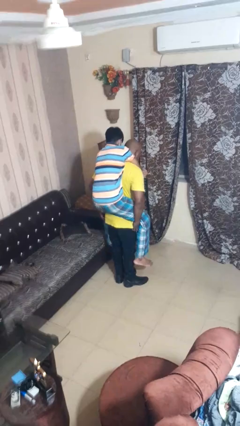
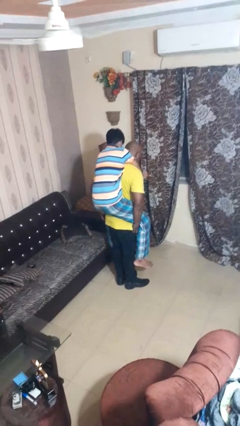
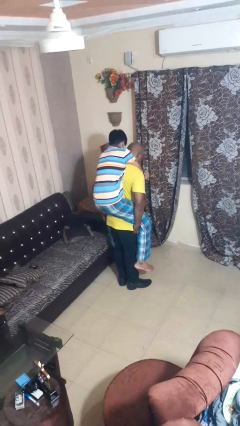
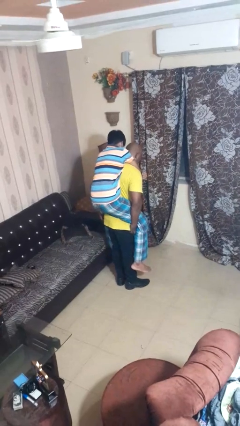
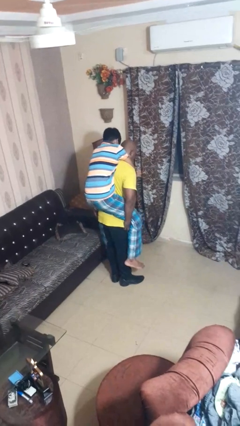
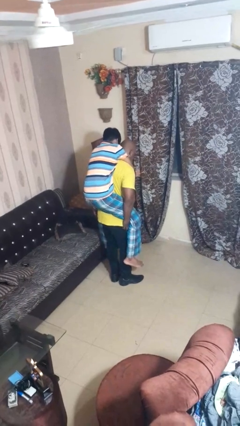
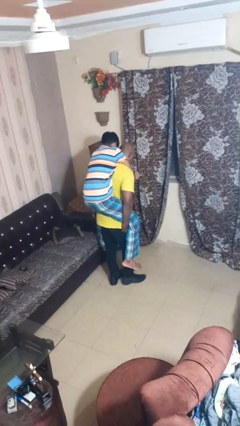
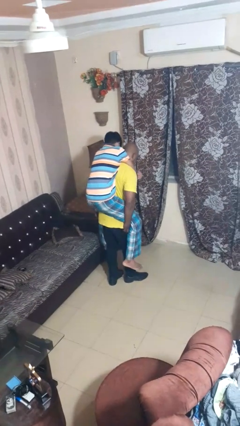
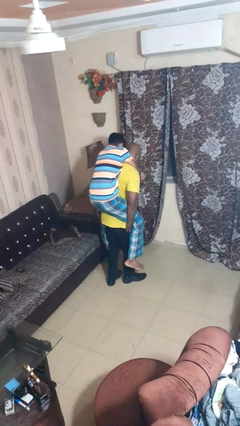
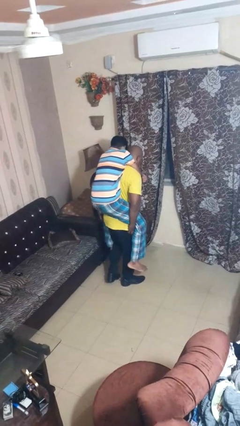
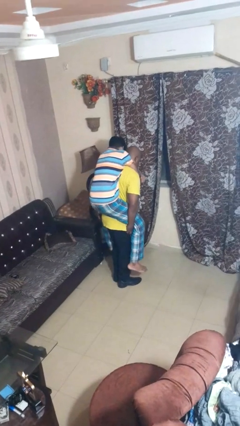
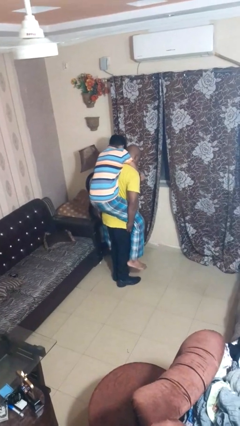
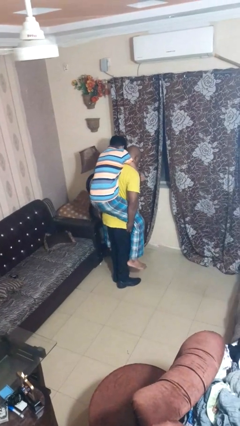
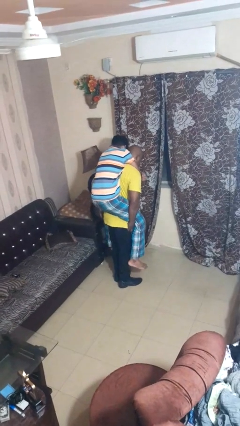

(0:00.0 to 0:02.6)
person carries person on back

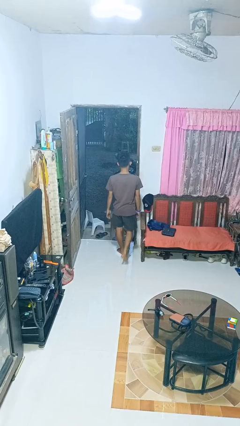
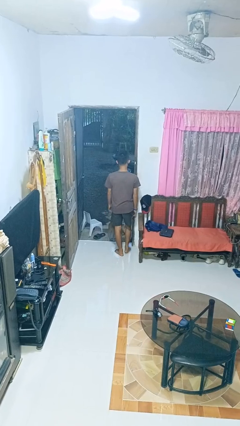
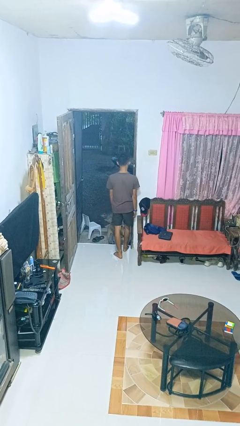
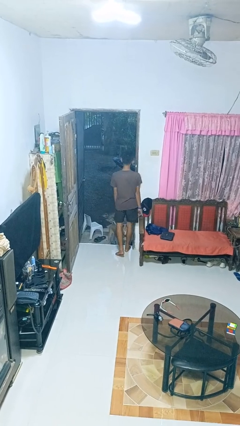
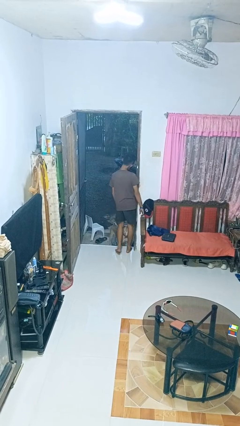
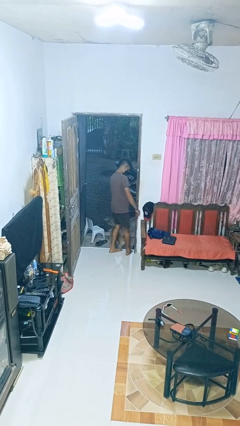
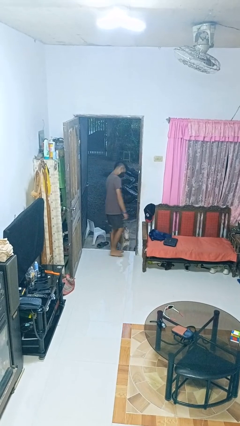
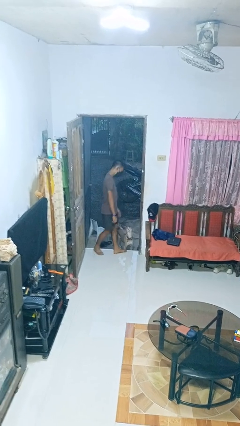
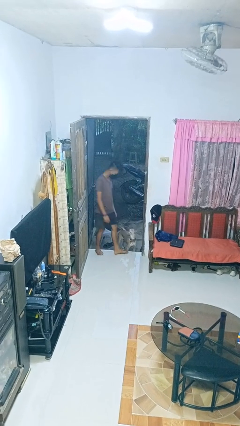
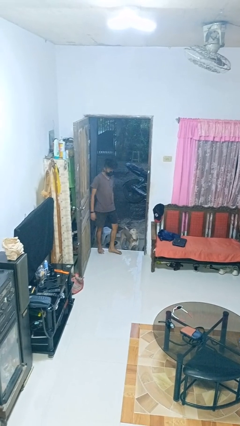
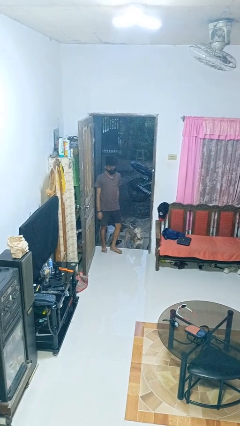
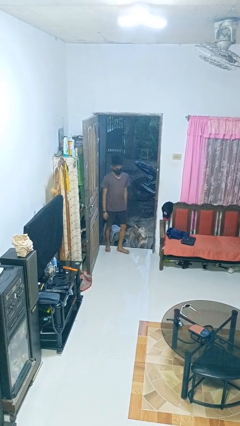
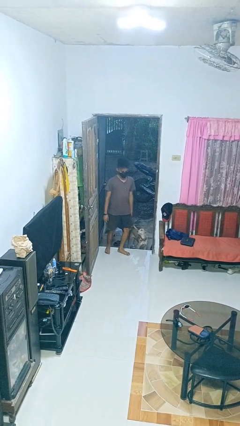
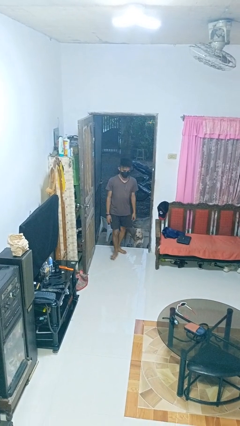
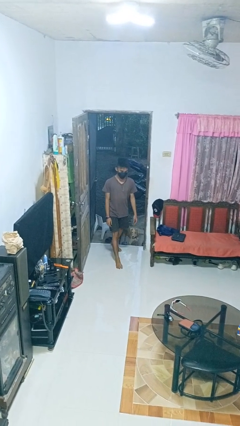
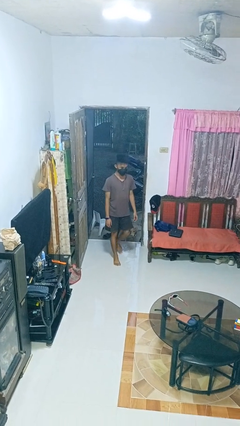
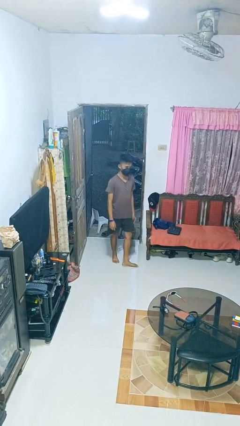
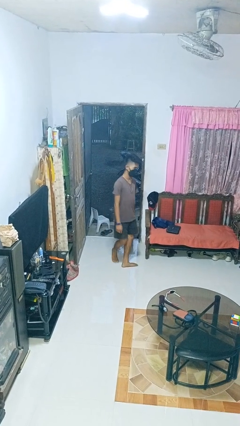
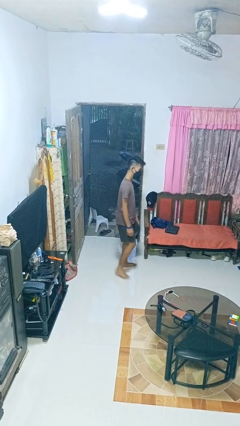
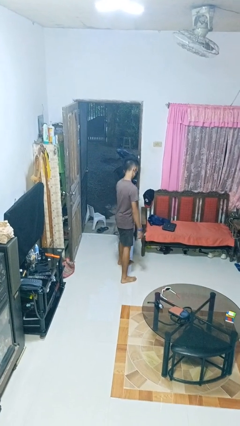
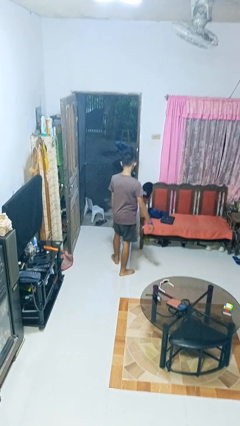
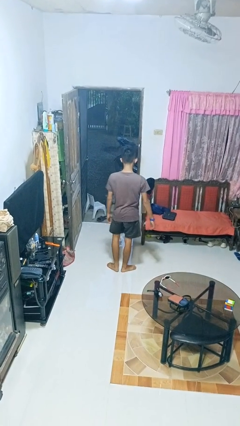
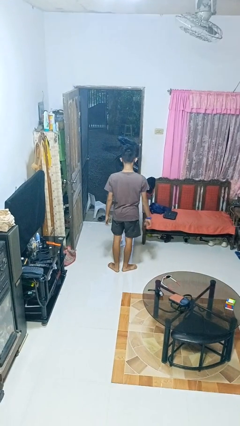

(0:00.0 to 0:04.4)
person bumps into wall

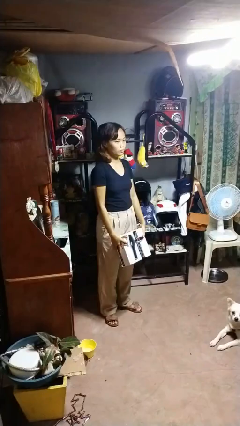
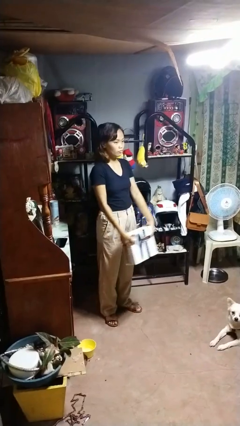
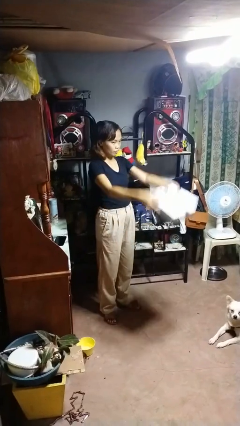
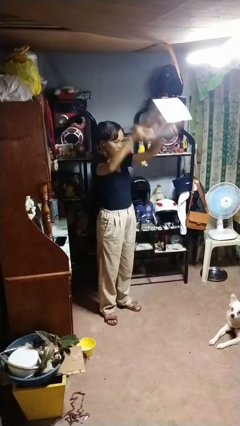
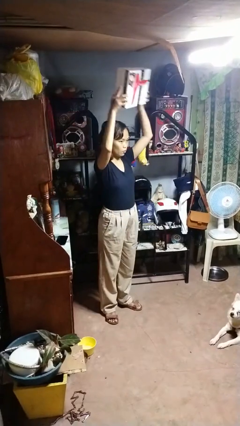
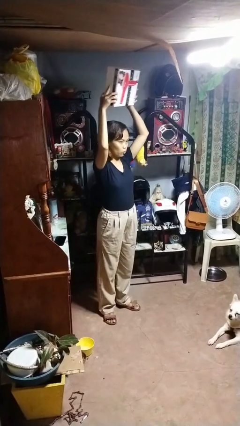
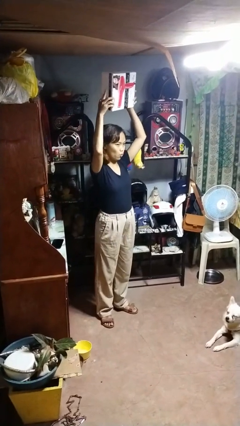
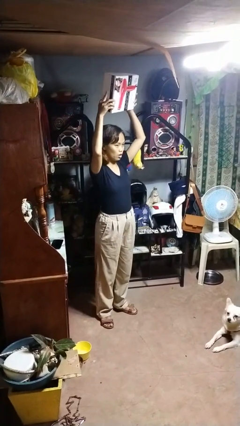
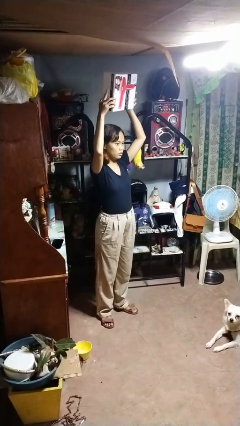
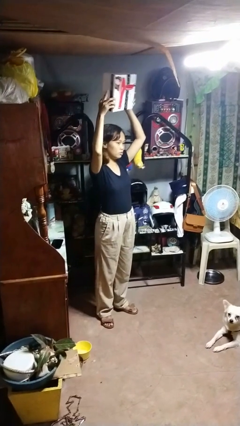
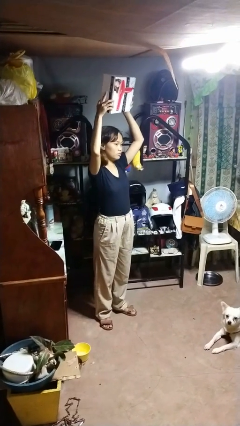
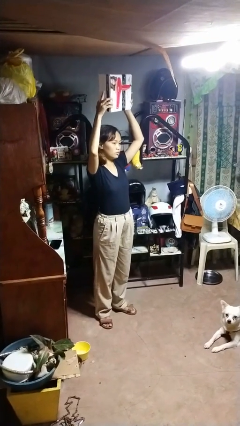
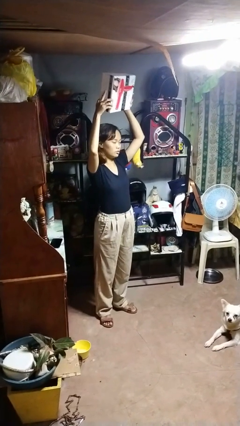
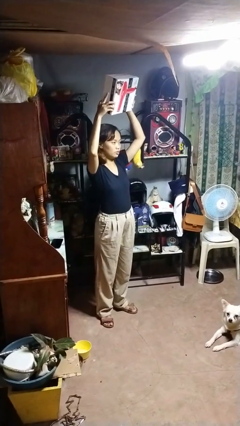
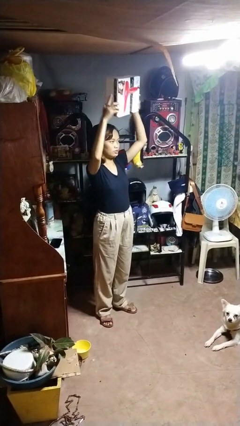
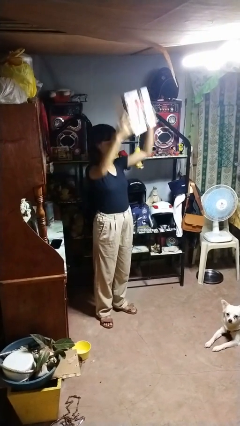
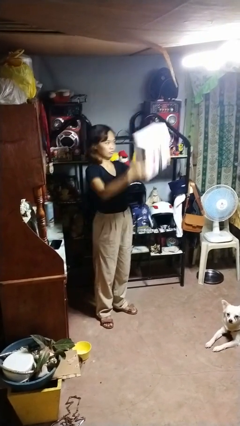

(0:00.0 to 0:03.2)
person holds object above head

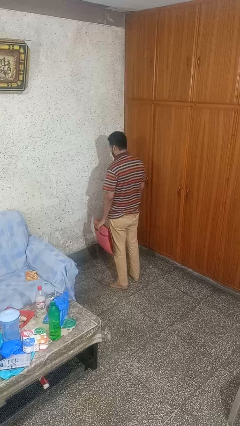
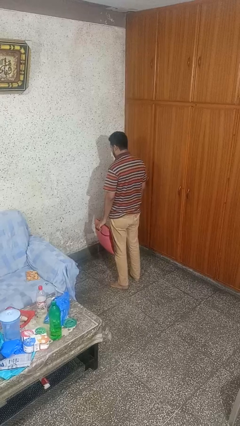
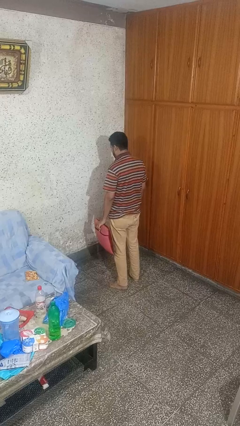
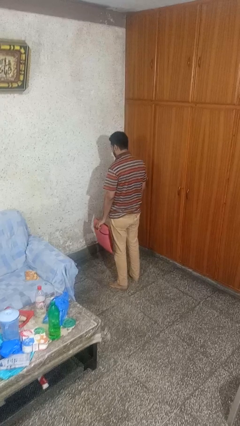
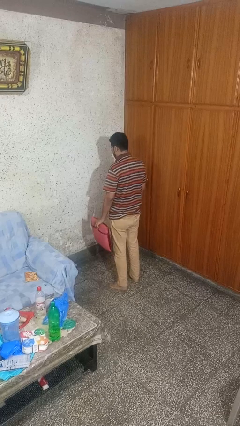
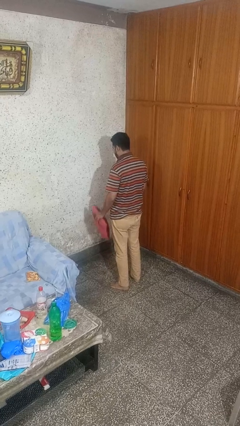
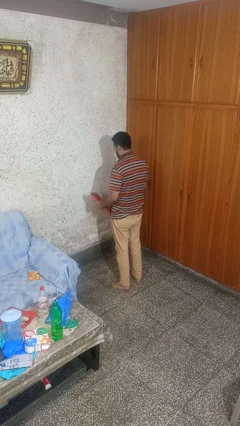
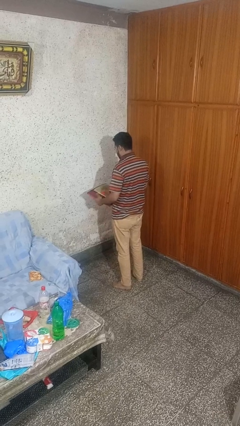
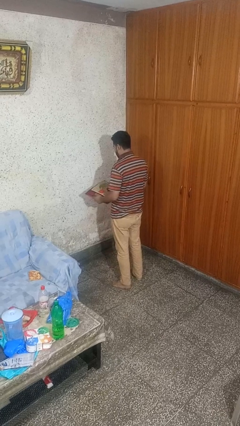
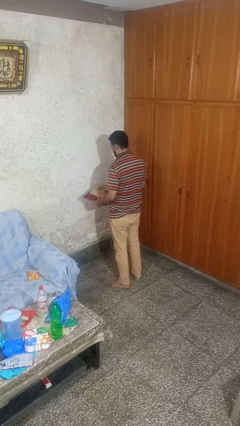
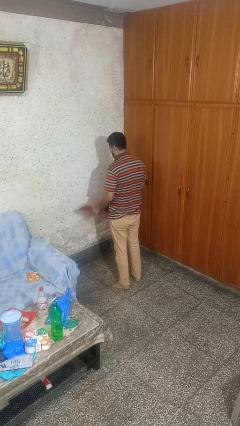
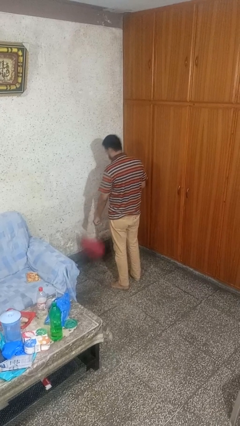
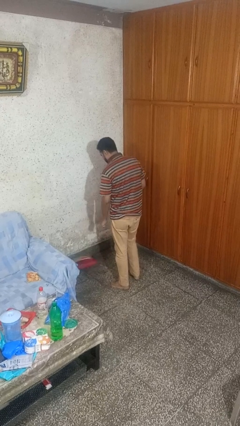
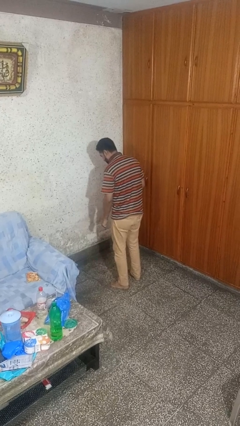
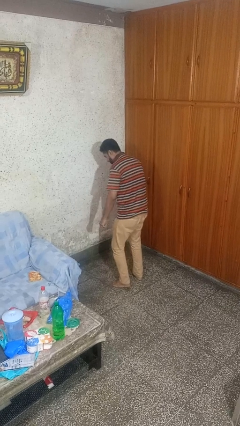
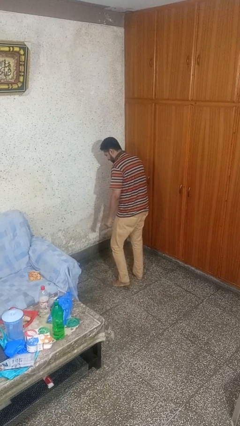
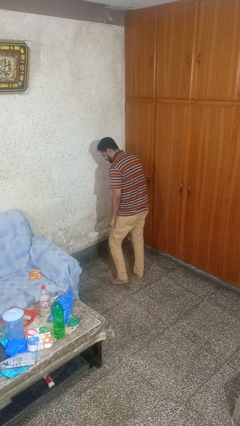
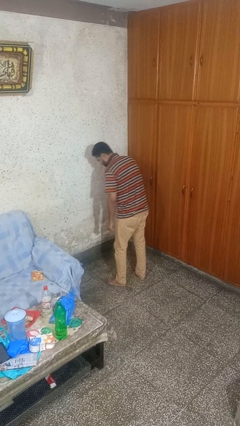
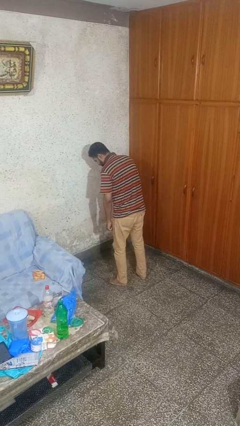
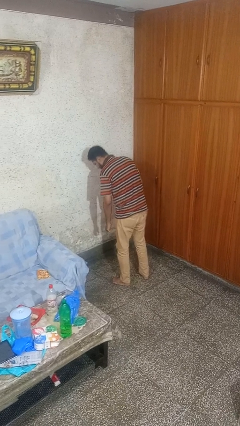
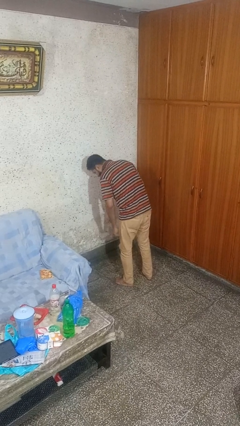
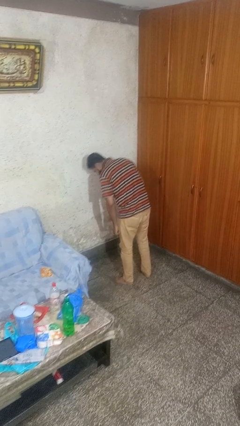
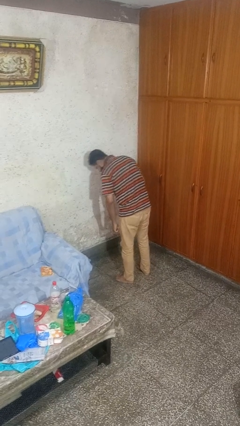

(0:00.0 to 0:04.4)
person drops object

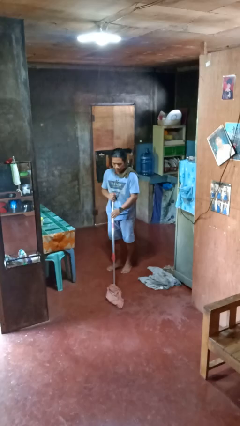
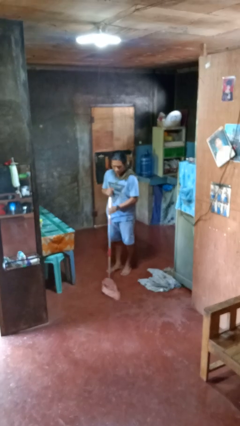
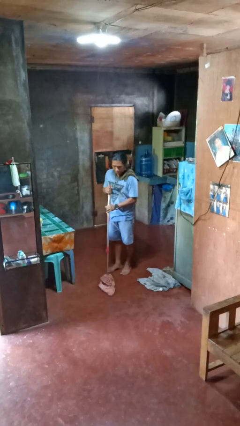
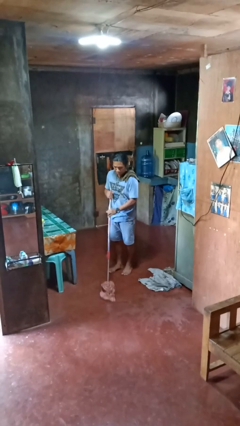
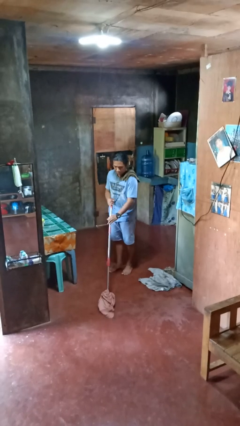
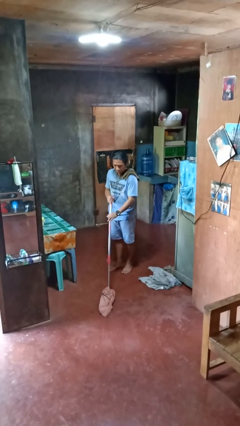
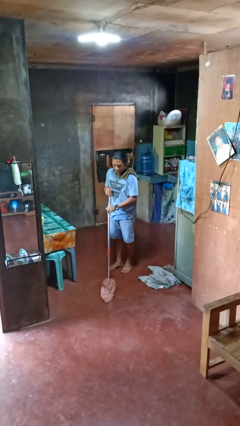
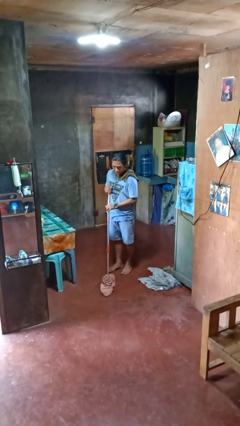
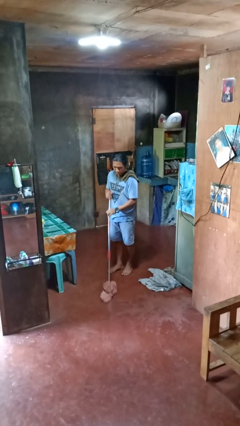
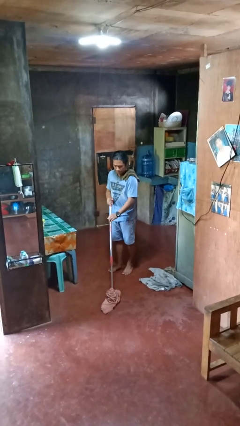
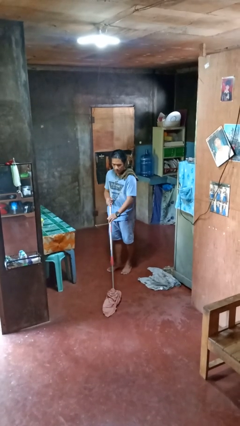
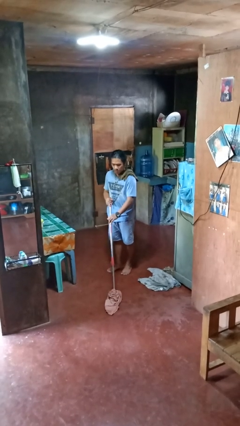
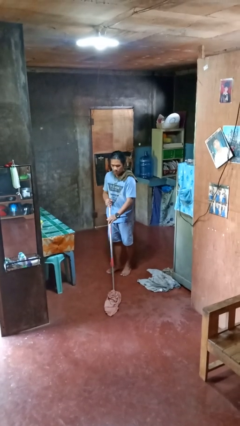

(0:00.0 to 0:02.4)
person mops

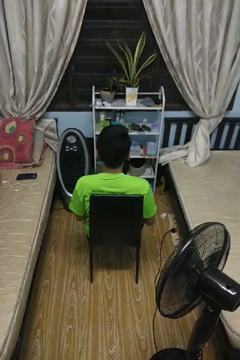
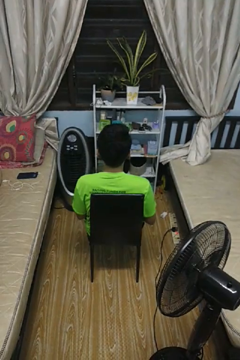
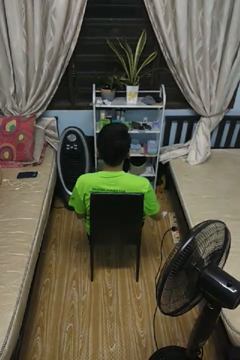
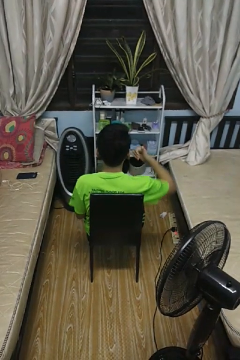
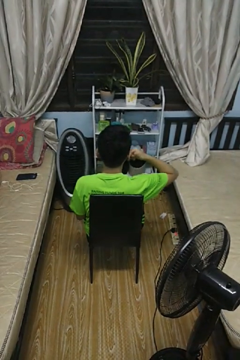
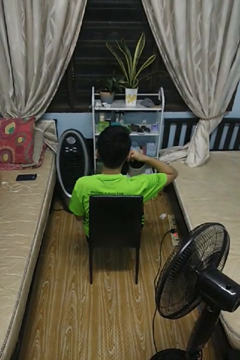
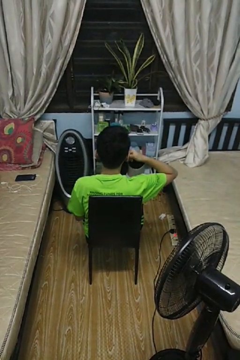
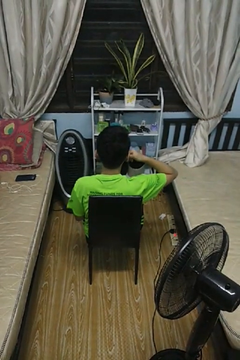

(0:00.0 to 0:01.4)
person gestures call me
